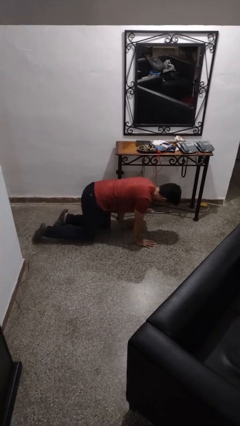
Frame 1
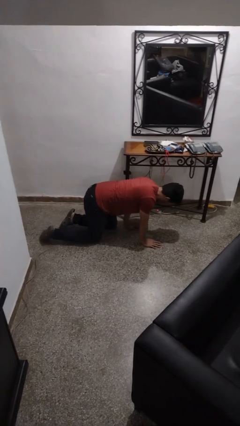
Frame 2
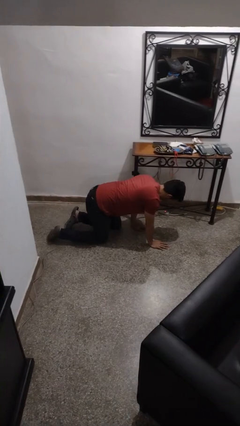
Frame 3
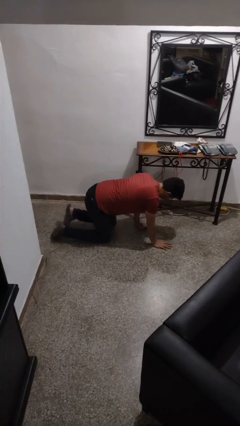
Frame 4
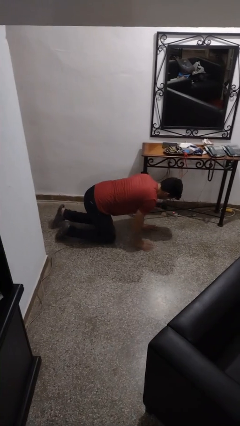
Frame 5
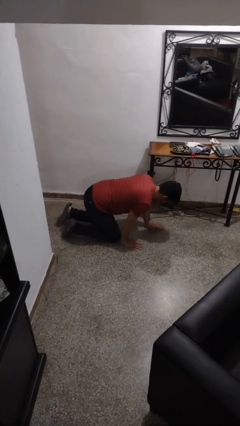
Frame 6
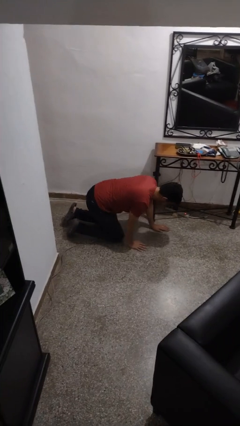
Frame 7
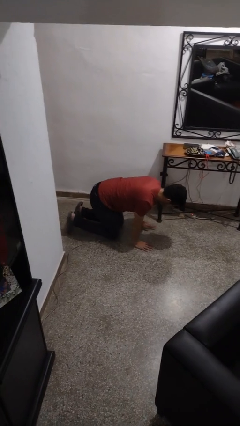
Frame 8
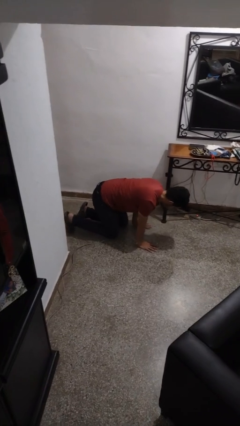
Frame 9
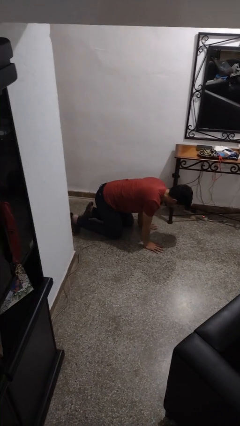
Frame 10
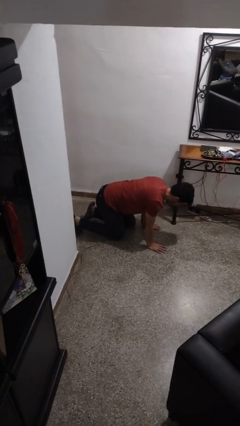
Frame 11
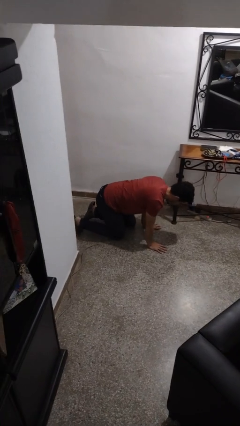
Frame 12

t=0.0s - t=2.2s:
person crawls

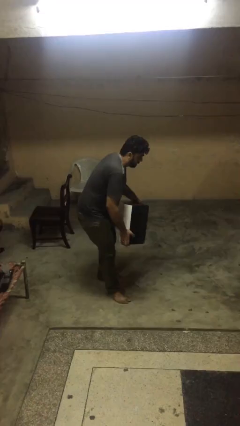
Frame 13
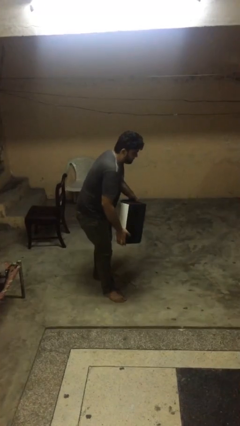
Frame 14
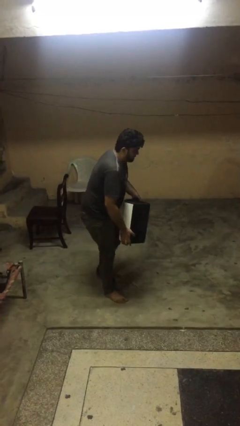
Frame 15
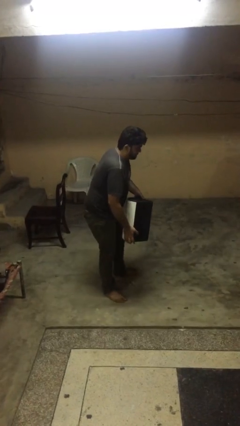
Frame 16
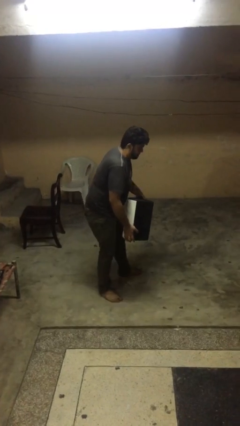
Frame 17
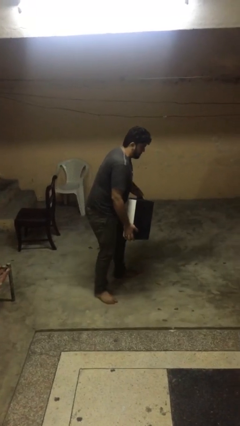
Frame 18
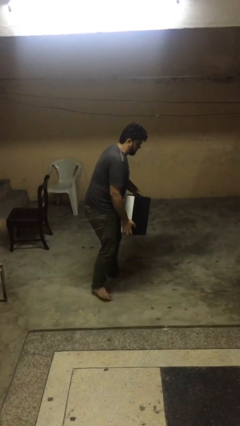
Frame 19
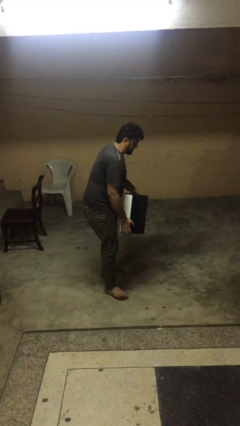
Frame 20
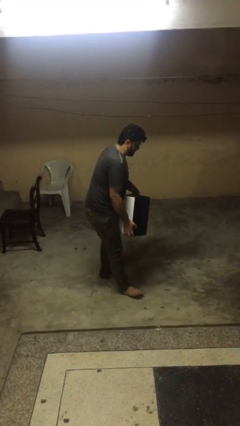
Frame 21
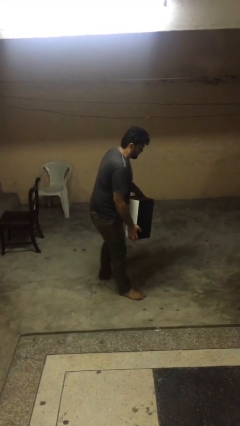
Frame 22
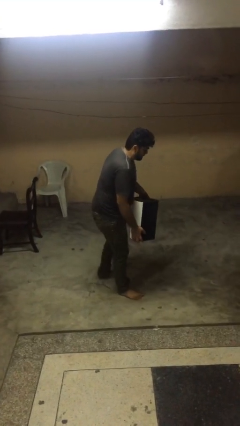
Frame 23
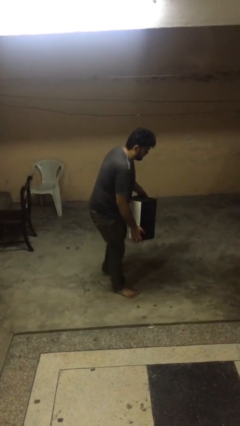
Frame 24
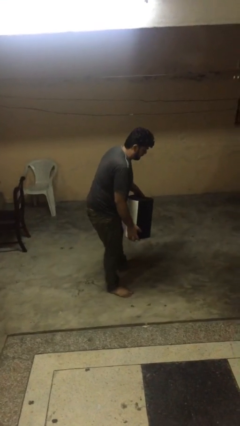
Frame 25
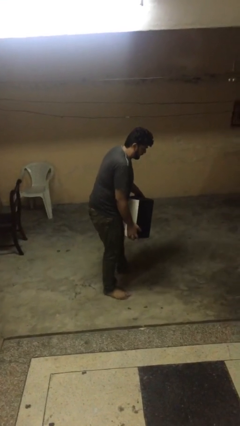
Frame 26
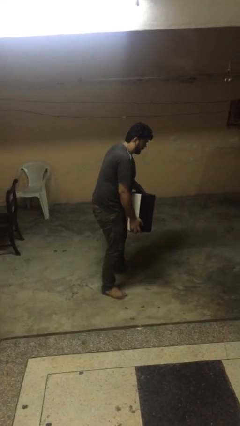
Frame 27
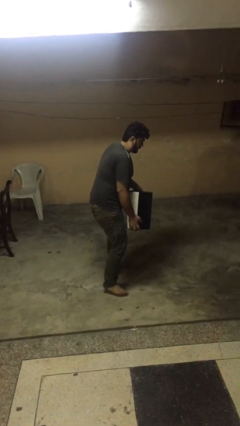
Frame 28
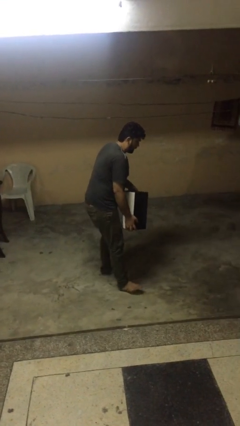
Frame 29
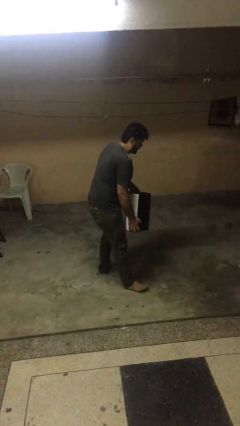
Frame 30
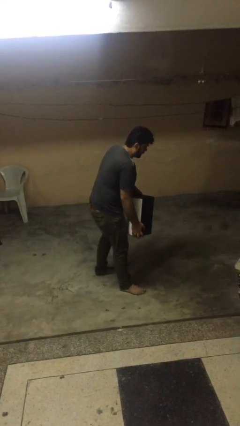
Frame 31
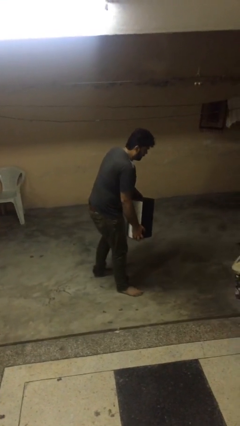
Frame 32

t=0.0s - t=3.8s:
person carries heavy object

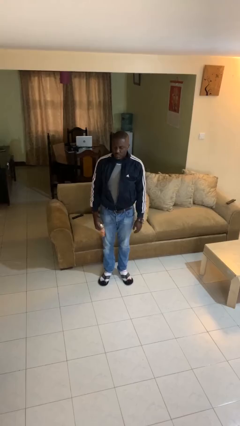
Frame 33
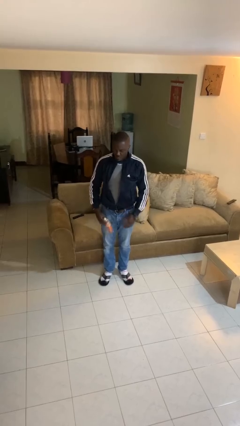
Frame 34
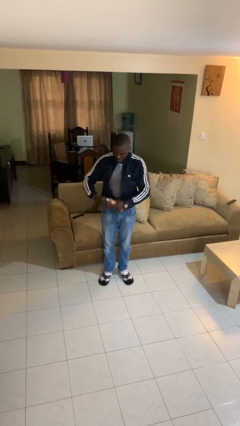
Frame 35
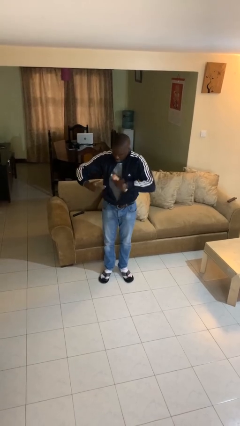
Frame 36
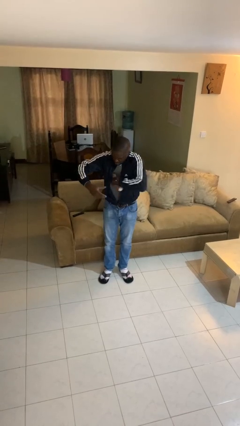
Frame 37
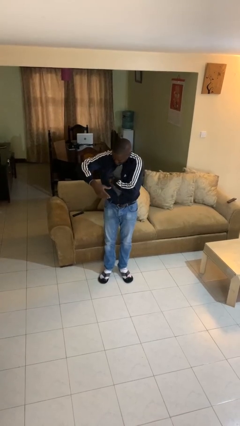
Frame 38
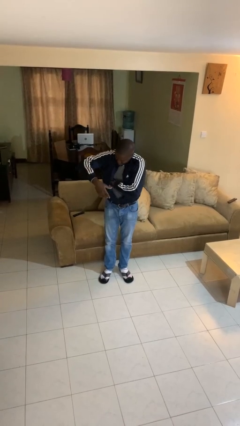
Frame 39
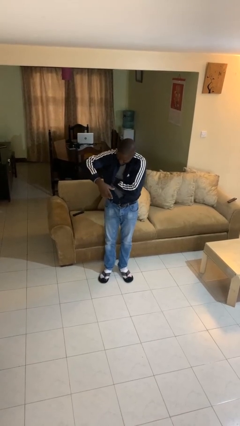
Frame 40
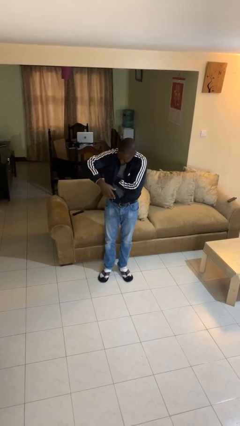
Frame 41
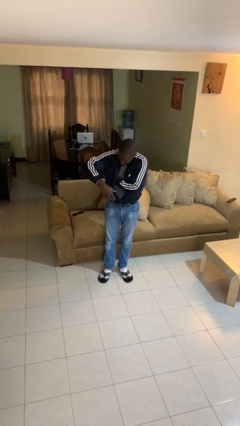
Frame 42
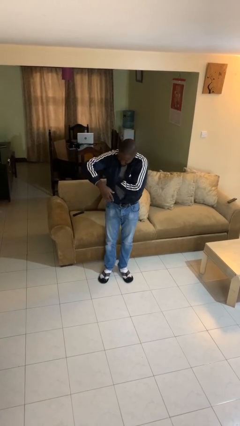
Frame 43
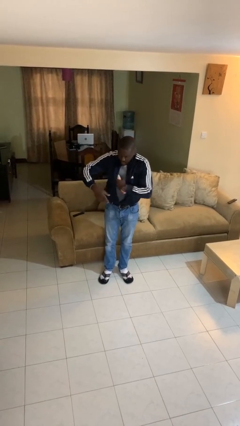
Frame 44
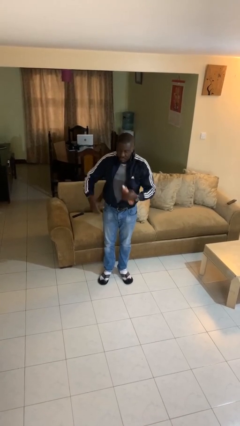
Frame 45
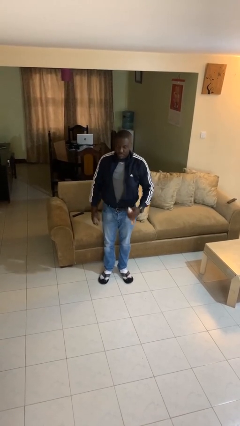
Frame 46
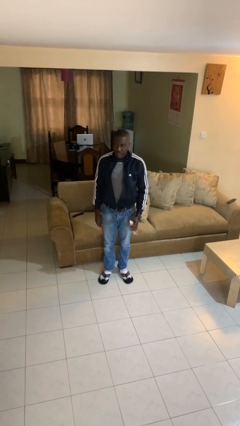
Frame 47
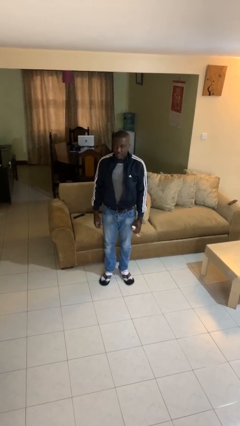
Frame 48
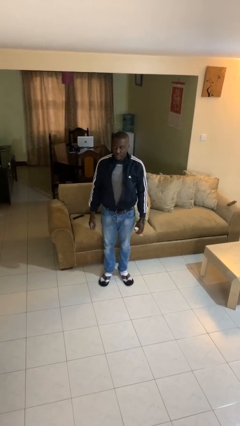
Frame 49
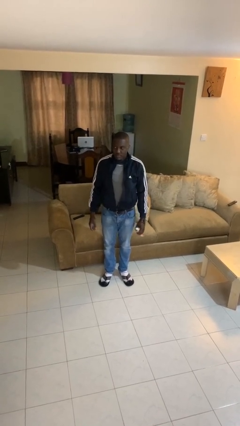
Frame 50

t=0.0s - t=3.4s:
person applies deodorant

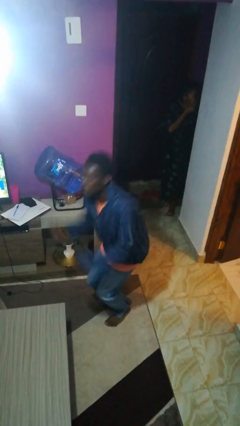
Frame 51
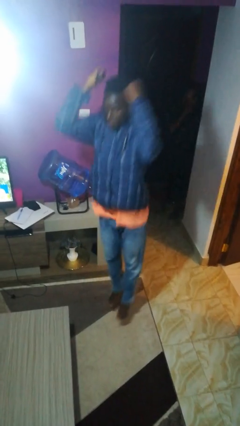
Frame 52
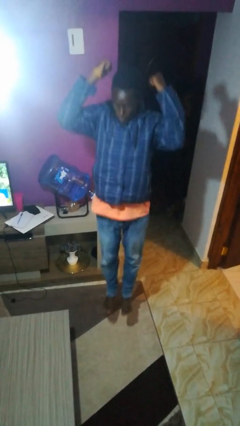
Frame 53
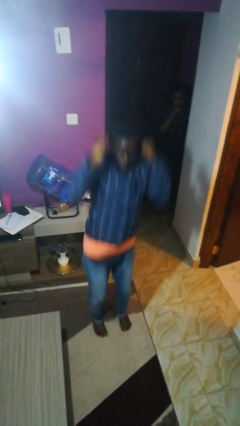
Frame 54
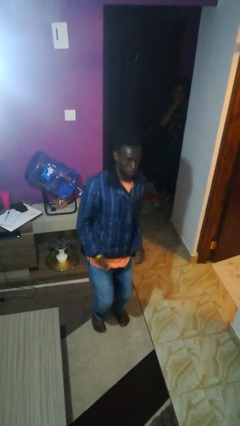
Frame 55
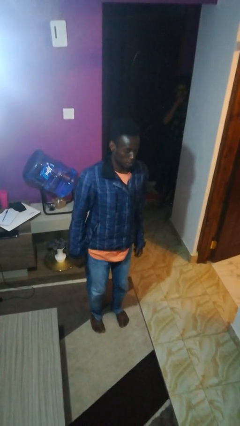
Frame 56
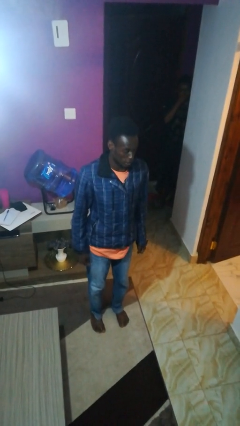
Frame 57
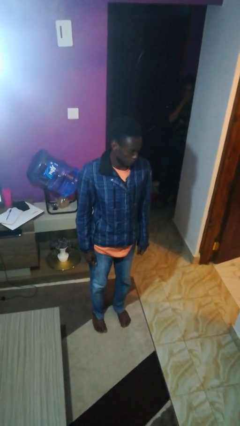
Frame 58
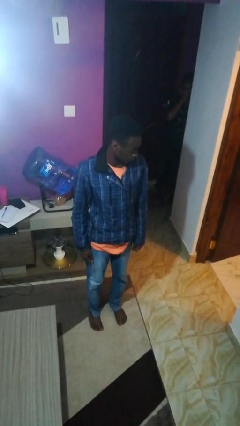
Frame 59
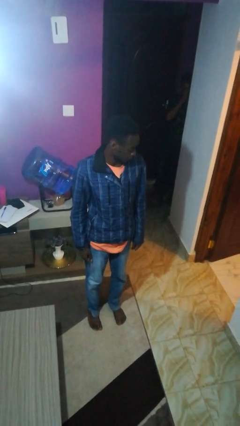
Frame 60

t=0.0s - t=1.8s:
person jumps

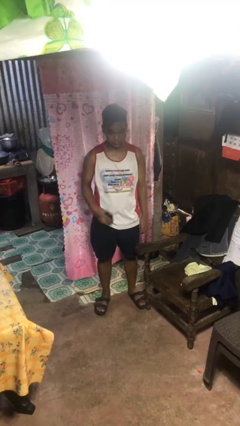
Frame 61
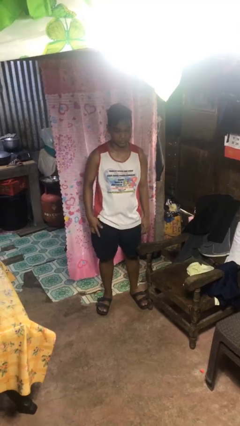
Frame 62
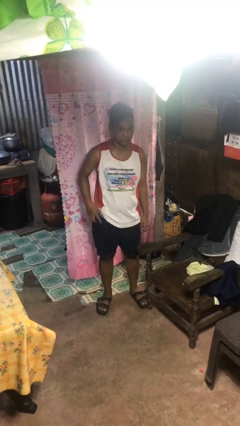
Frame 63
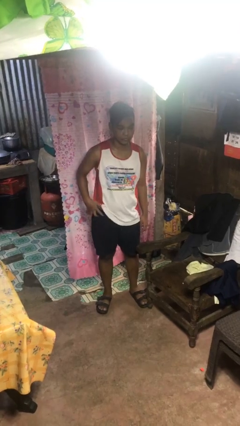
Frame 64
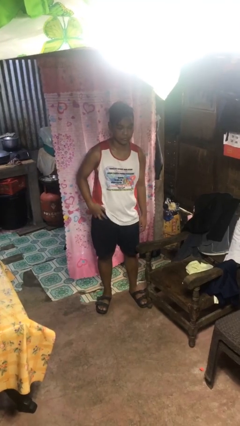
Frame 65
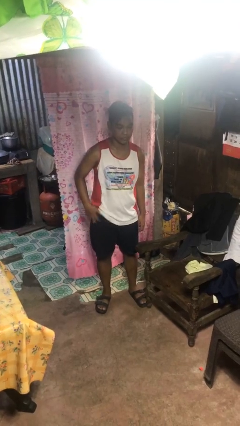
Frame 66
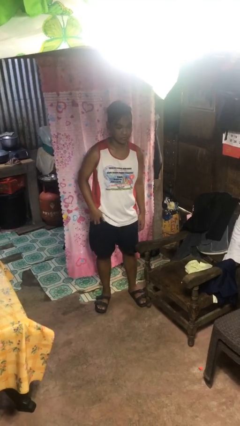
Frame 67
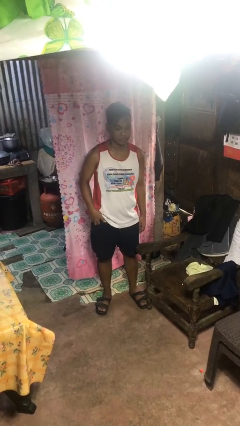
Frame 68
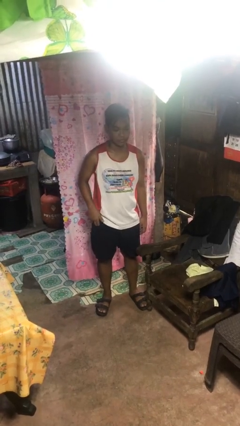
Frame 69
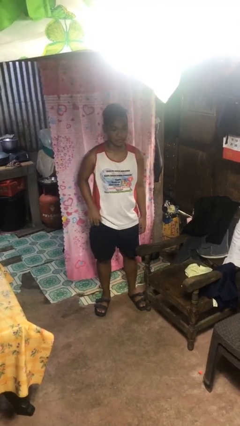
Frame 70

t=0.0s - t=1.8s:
person puts phone into pocket

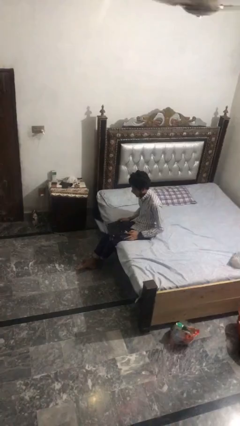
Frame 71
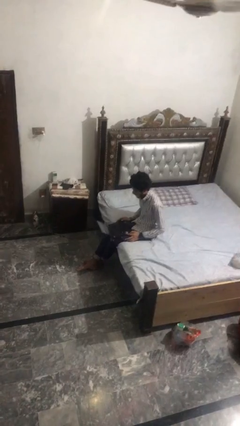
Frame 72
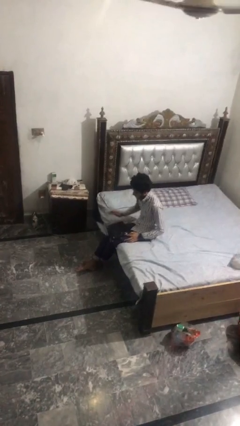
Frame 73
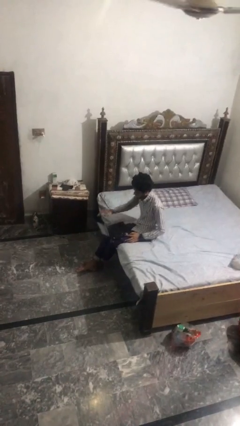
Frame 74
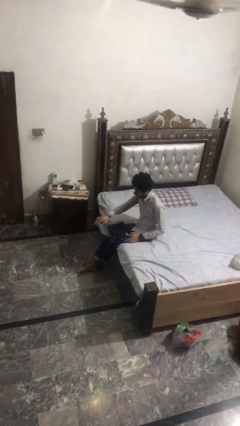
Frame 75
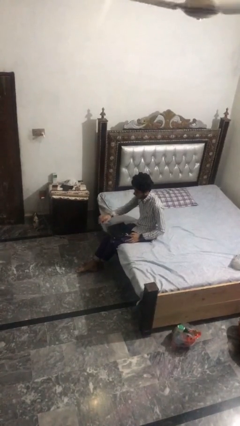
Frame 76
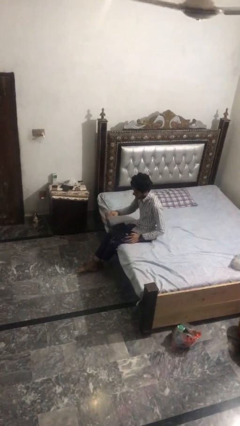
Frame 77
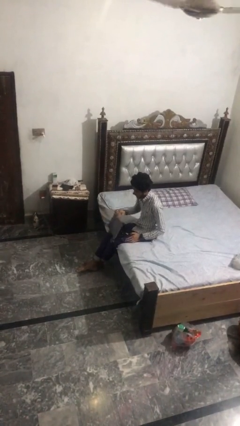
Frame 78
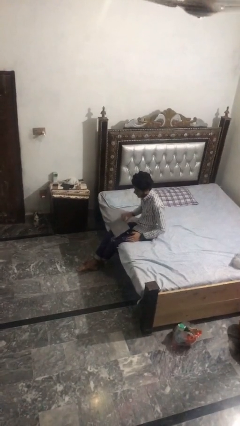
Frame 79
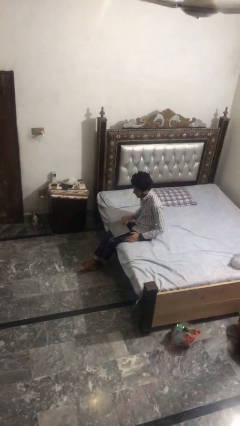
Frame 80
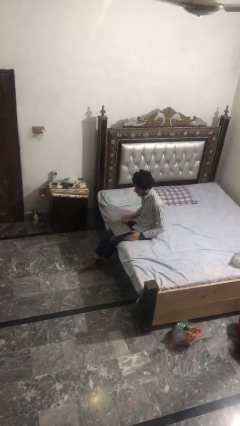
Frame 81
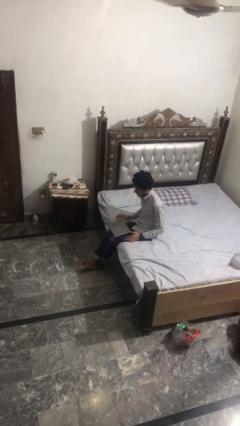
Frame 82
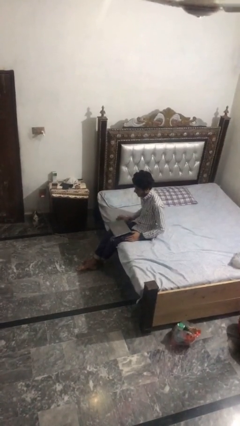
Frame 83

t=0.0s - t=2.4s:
person closes laptop

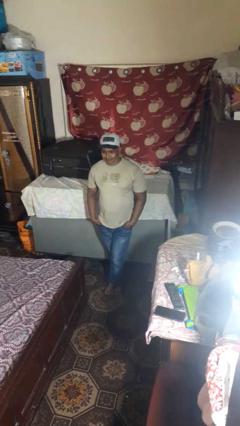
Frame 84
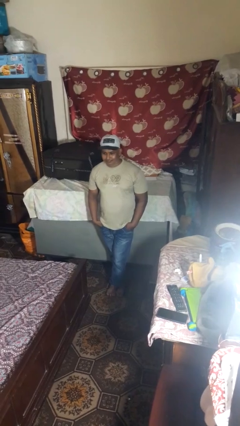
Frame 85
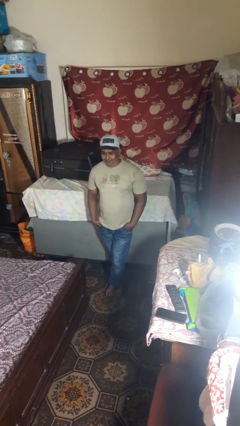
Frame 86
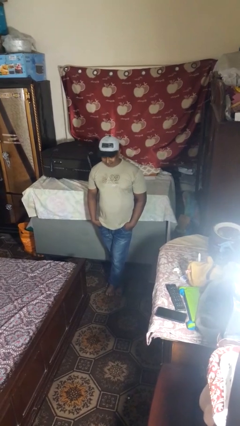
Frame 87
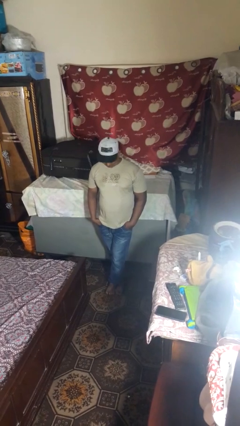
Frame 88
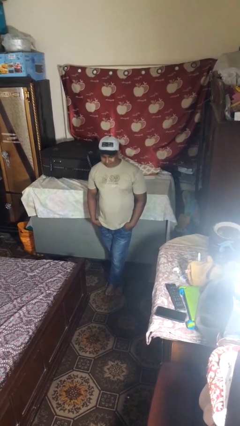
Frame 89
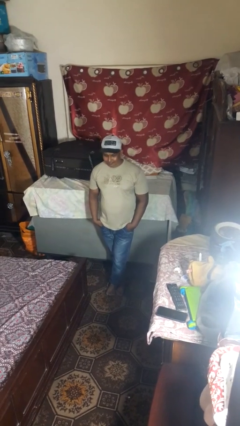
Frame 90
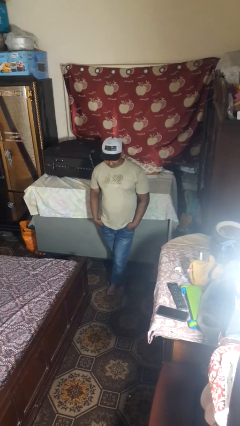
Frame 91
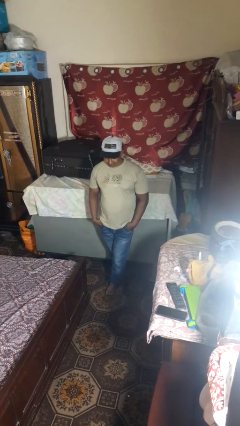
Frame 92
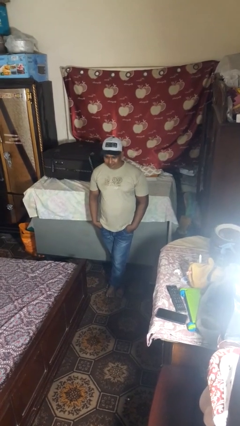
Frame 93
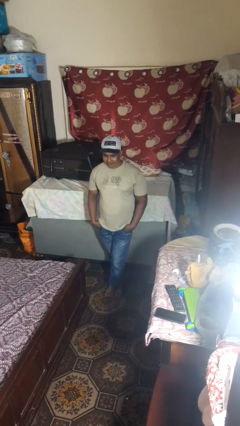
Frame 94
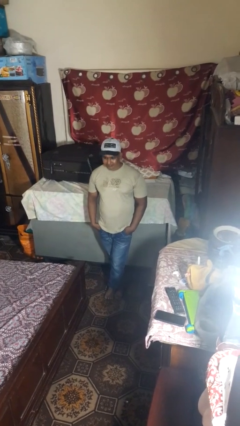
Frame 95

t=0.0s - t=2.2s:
person nods head
